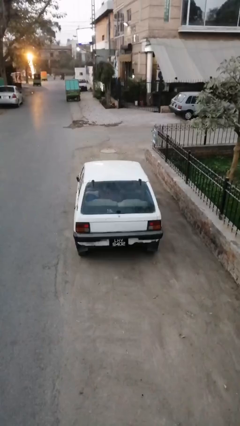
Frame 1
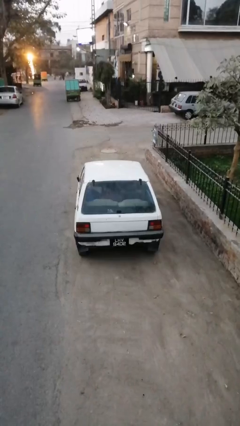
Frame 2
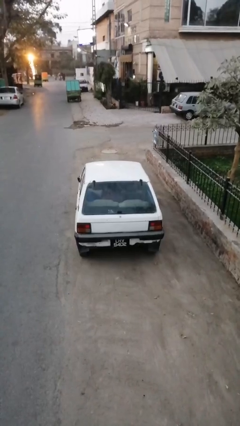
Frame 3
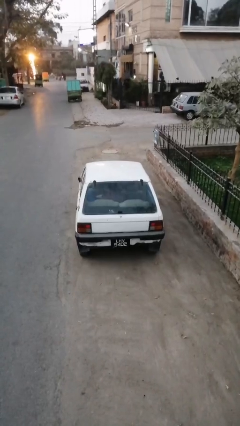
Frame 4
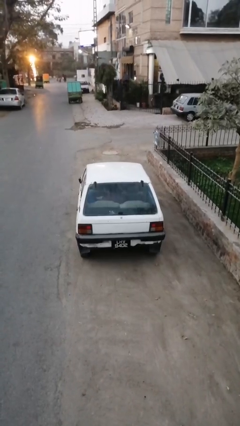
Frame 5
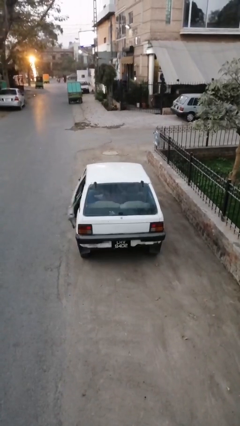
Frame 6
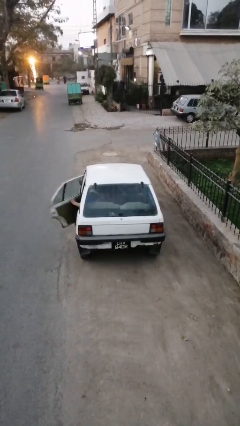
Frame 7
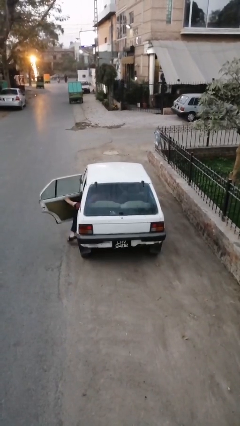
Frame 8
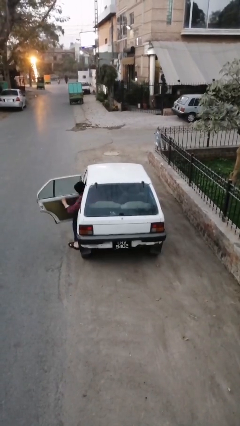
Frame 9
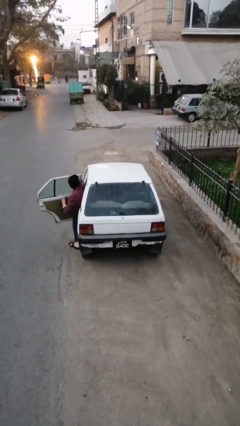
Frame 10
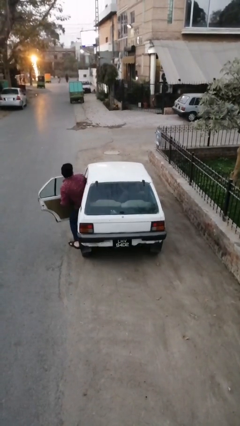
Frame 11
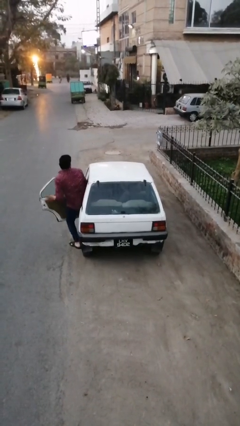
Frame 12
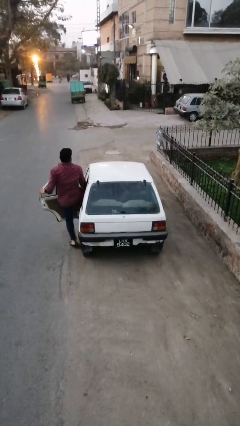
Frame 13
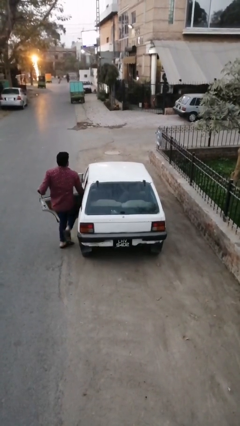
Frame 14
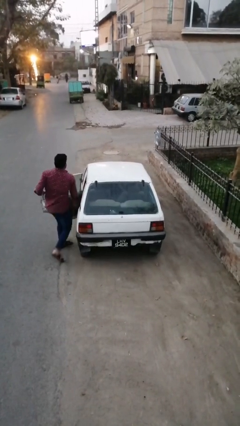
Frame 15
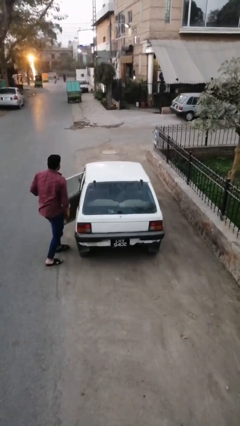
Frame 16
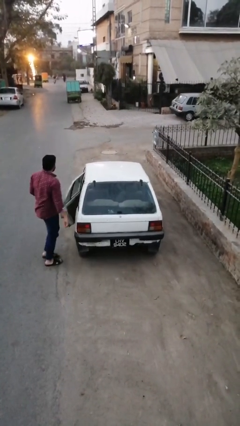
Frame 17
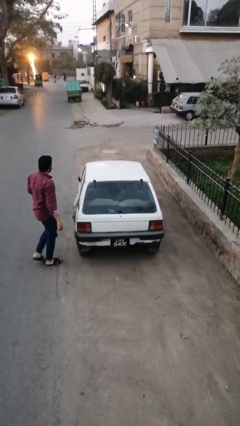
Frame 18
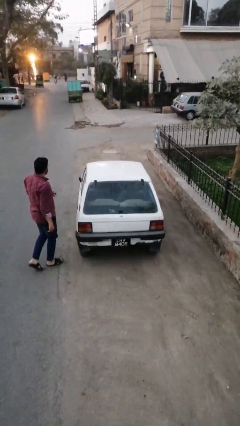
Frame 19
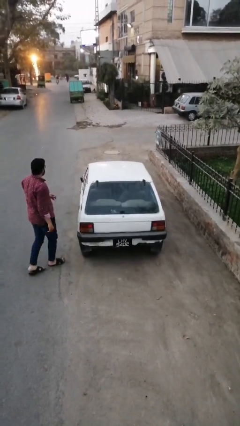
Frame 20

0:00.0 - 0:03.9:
car drops off person

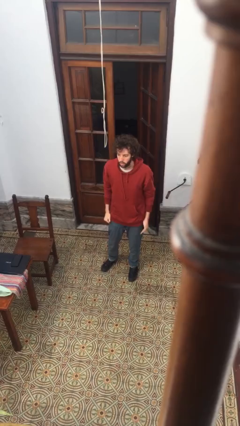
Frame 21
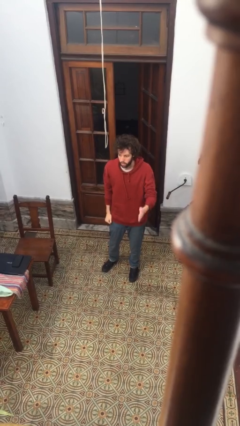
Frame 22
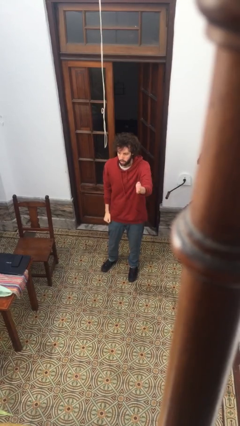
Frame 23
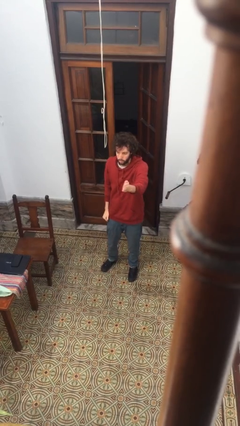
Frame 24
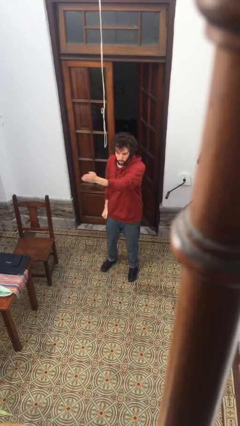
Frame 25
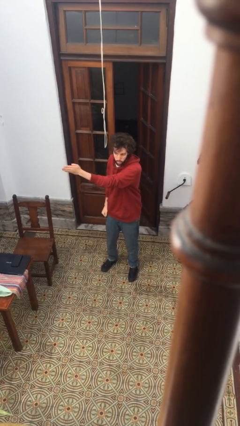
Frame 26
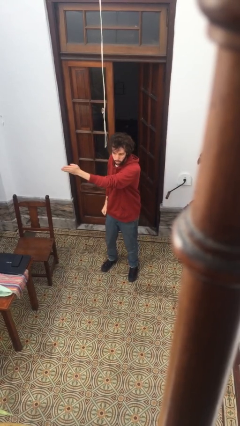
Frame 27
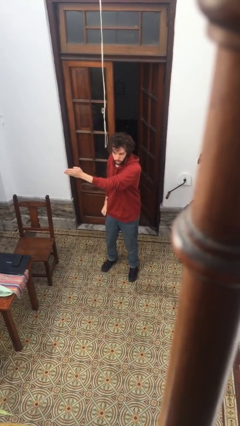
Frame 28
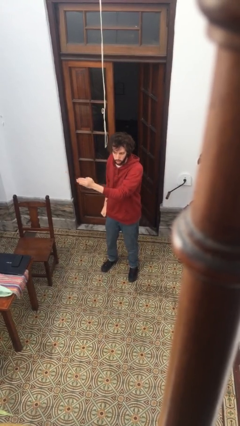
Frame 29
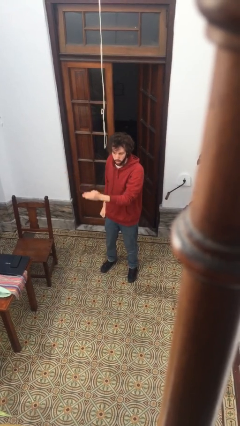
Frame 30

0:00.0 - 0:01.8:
person gestures swipe right

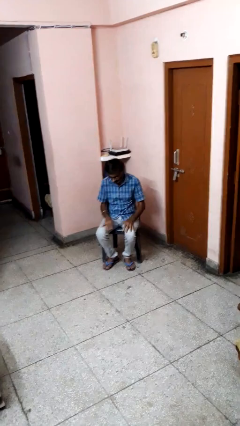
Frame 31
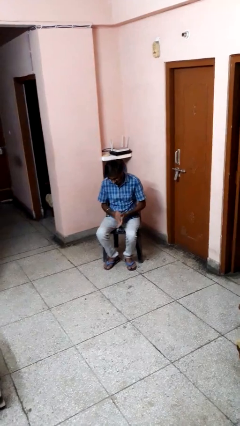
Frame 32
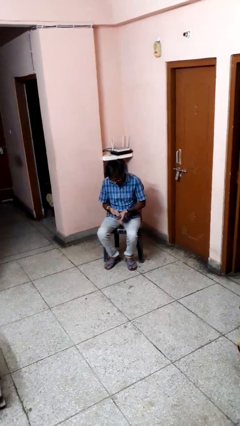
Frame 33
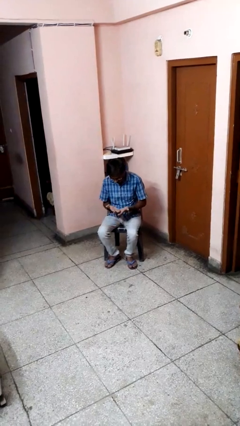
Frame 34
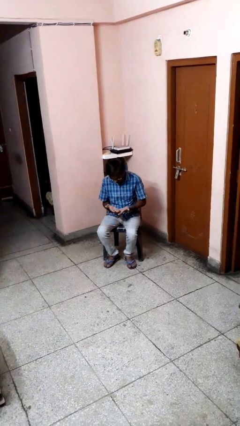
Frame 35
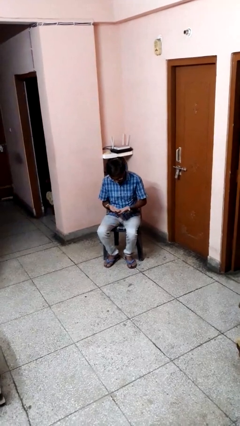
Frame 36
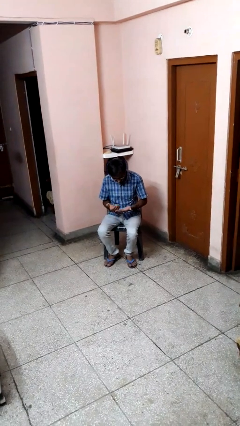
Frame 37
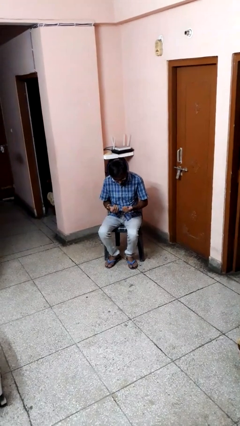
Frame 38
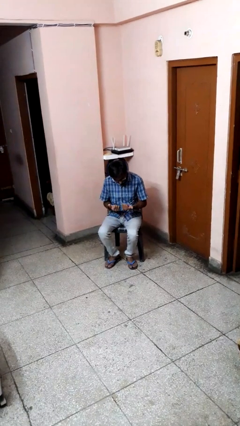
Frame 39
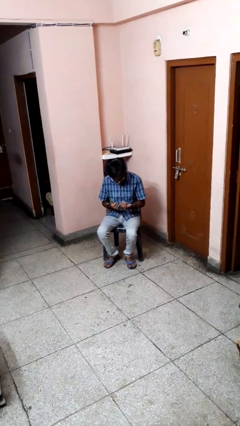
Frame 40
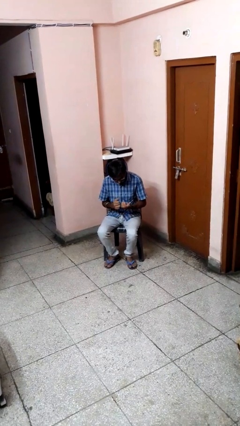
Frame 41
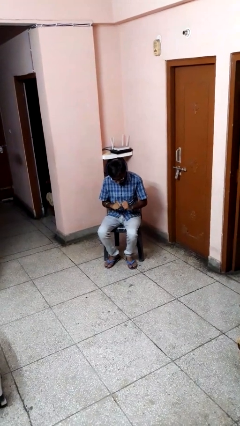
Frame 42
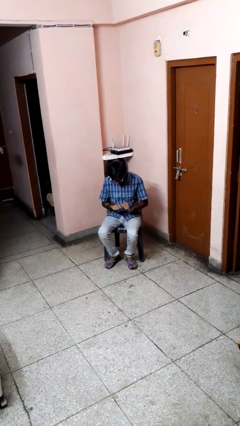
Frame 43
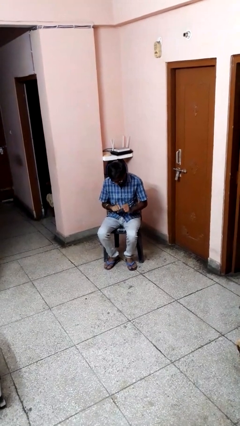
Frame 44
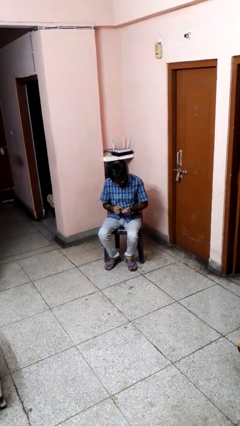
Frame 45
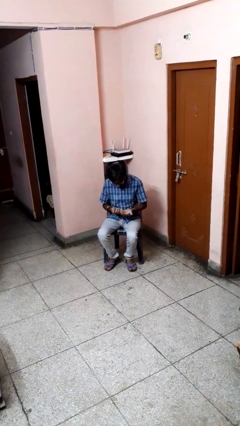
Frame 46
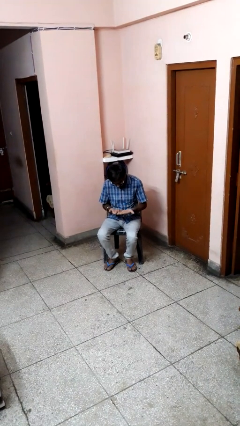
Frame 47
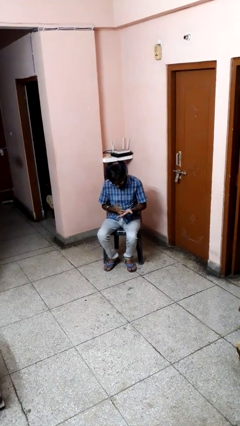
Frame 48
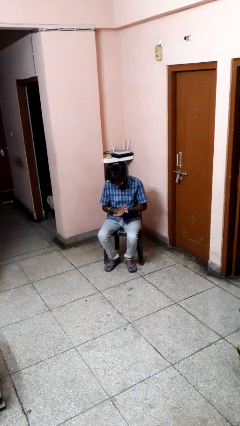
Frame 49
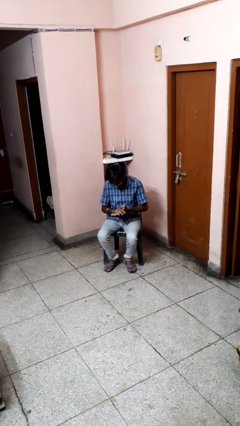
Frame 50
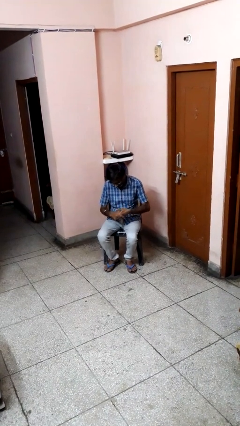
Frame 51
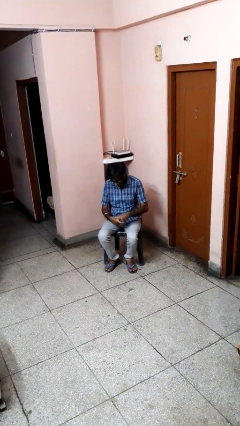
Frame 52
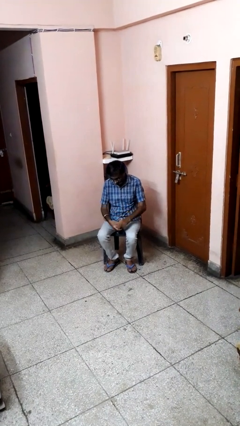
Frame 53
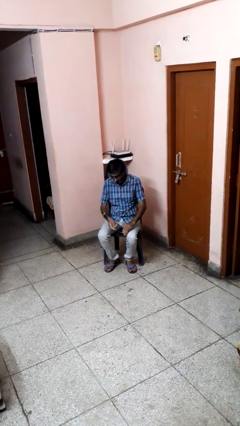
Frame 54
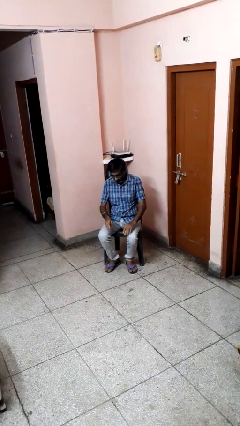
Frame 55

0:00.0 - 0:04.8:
person looks at hands in lap

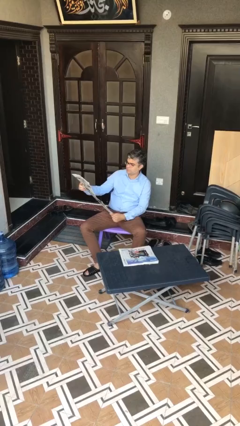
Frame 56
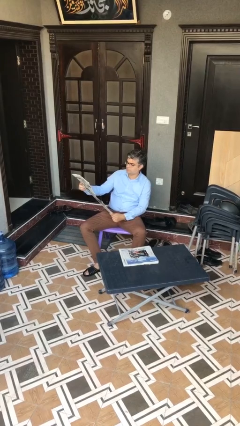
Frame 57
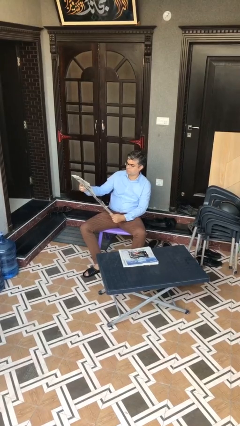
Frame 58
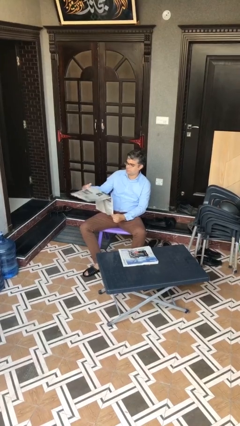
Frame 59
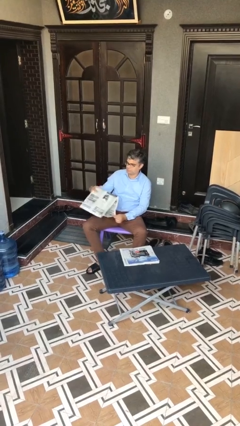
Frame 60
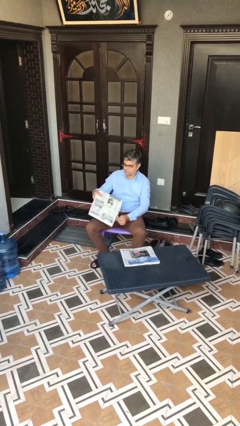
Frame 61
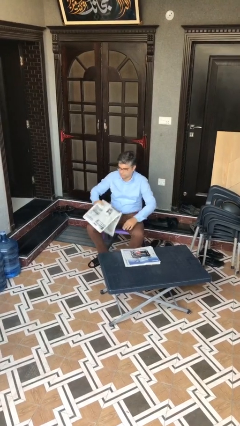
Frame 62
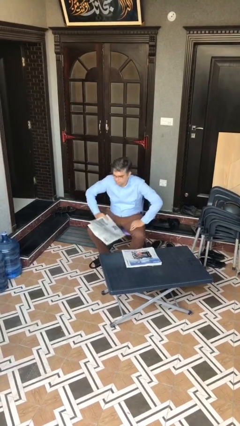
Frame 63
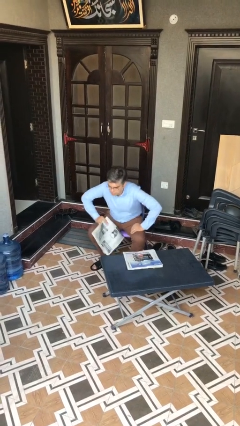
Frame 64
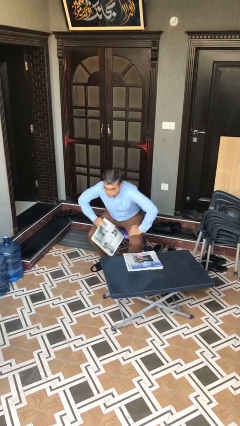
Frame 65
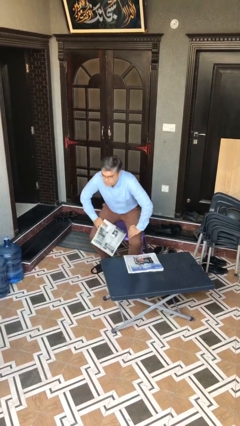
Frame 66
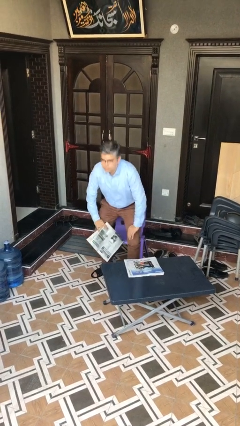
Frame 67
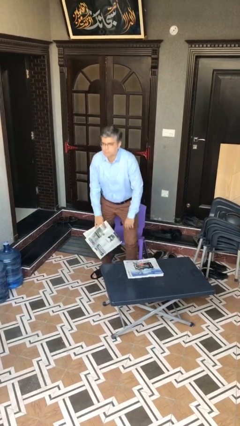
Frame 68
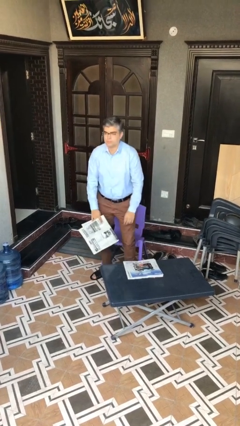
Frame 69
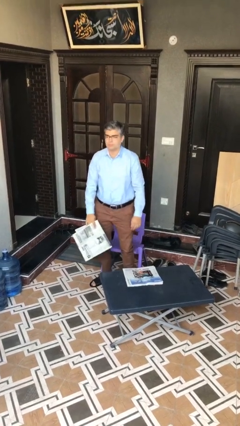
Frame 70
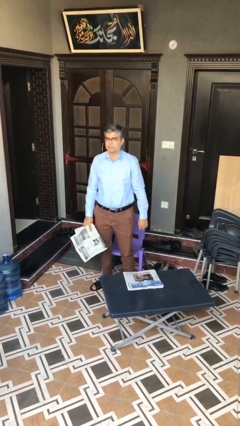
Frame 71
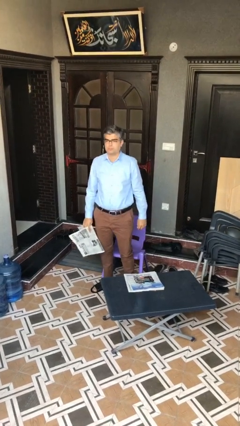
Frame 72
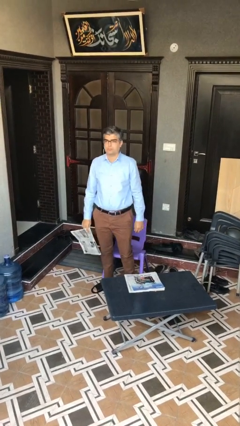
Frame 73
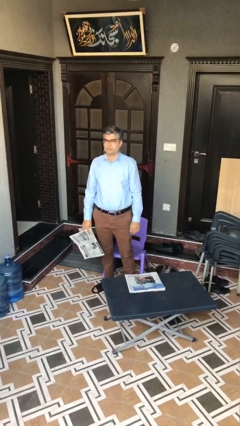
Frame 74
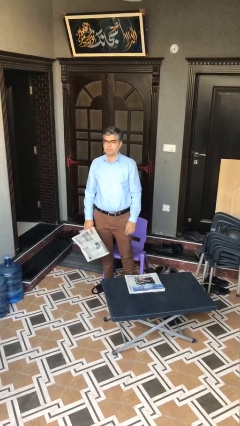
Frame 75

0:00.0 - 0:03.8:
person stands up

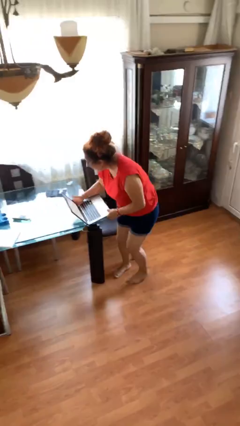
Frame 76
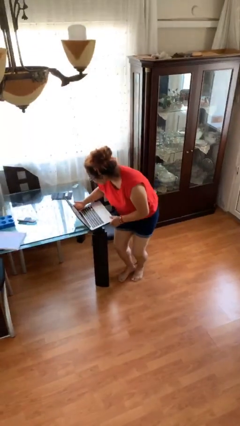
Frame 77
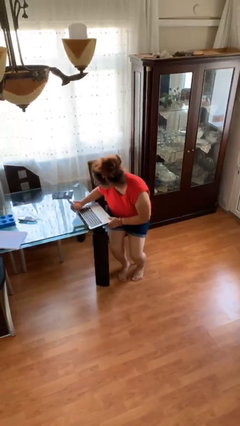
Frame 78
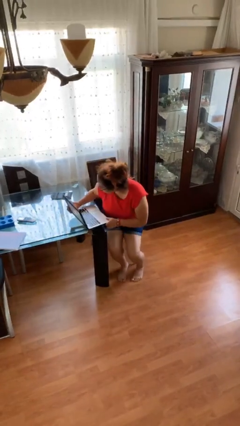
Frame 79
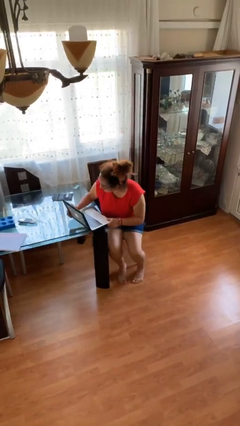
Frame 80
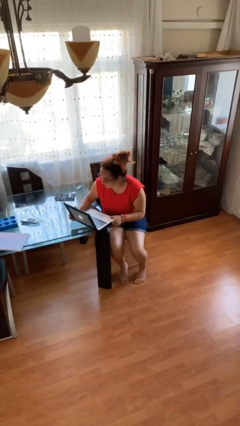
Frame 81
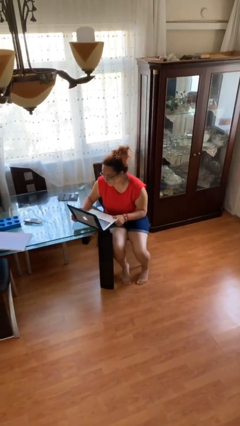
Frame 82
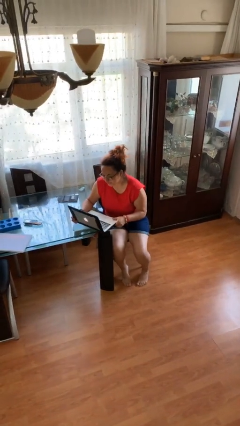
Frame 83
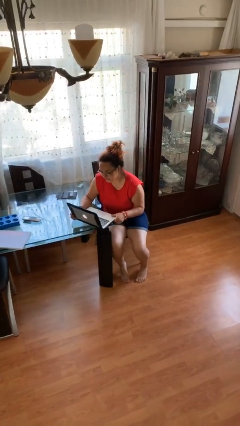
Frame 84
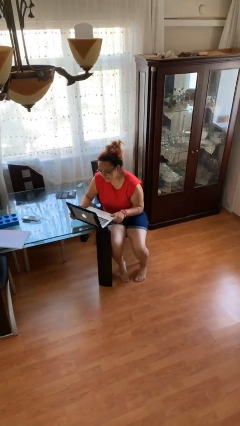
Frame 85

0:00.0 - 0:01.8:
person sits down

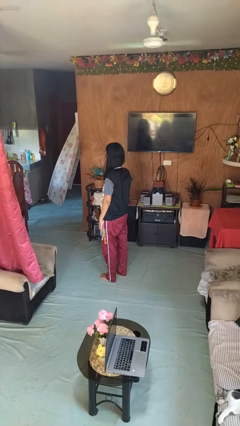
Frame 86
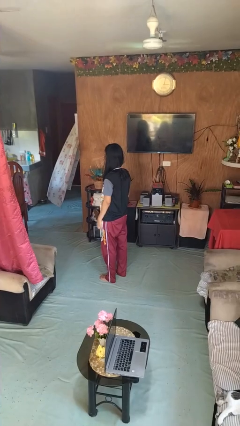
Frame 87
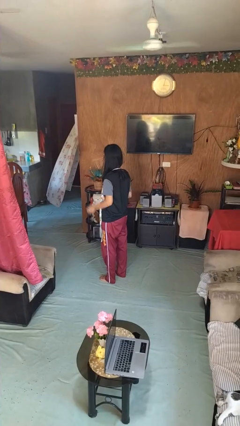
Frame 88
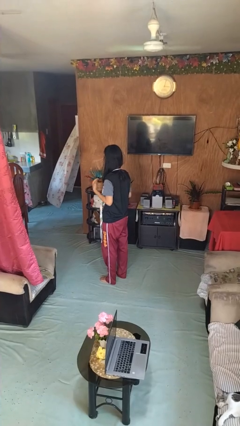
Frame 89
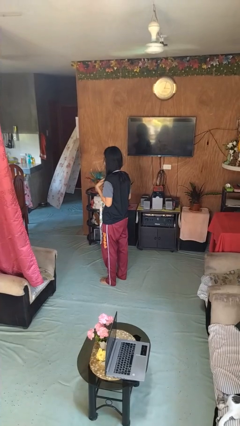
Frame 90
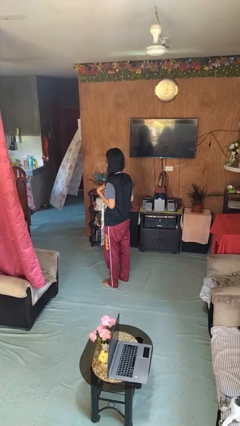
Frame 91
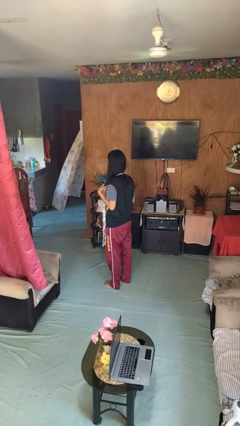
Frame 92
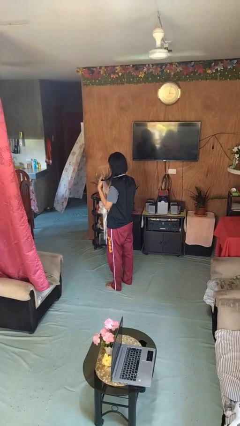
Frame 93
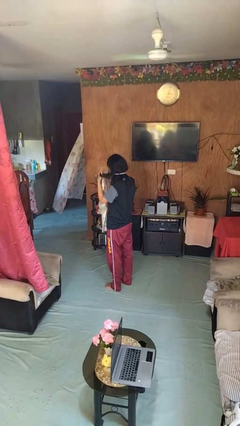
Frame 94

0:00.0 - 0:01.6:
person takes off apron
